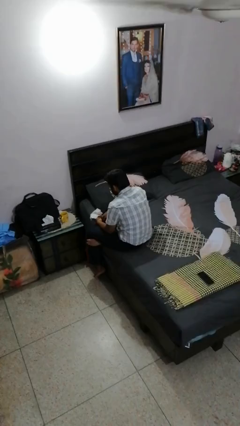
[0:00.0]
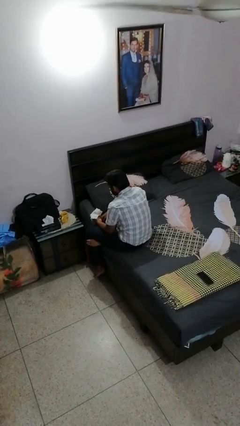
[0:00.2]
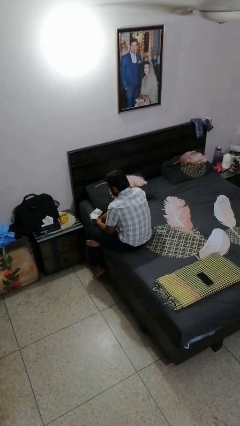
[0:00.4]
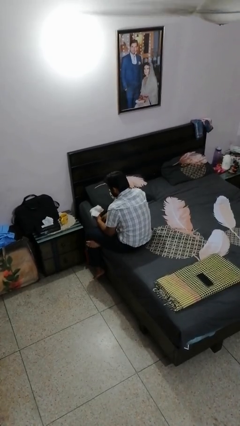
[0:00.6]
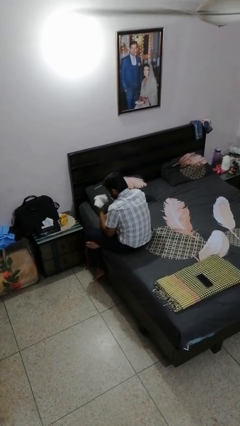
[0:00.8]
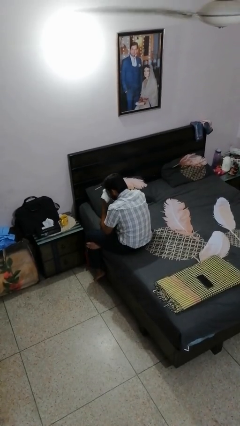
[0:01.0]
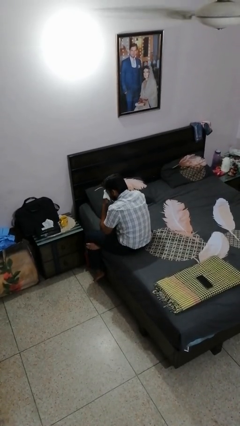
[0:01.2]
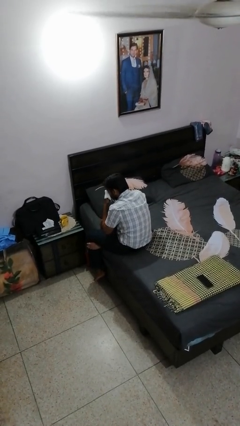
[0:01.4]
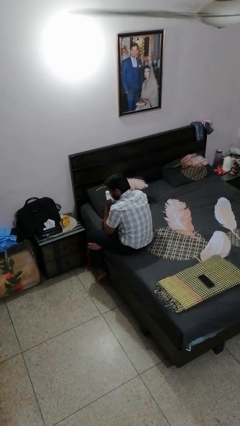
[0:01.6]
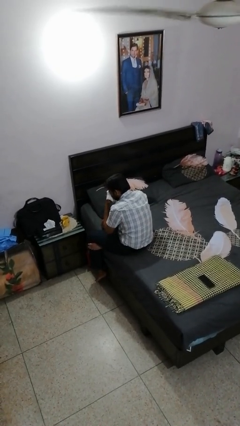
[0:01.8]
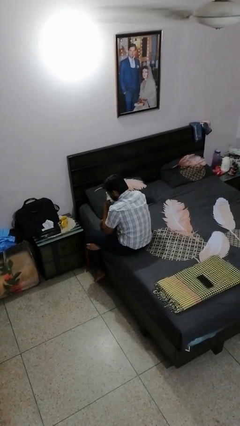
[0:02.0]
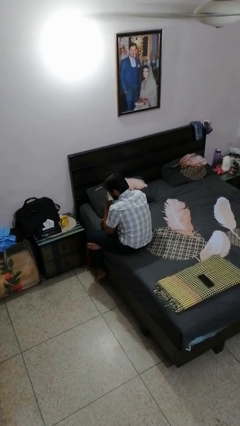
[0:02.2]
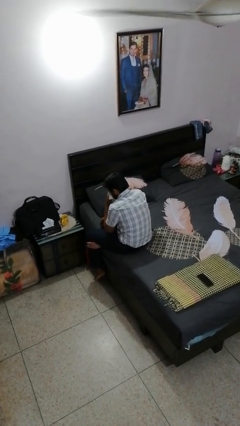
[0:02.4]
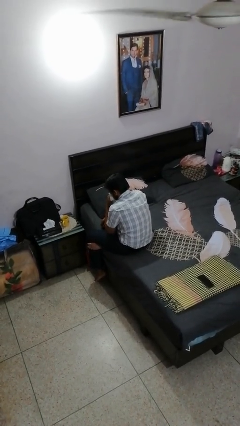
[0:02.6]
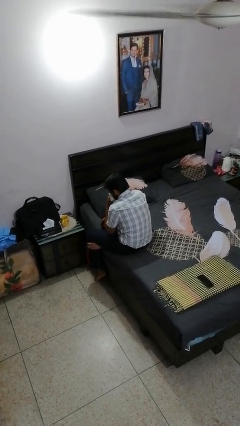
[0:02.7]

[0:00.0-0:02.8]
person blows nose

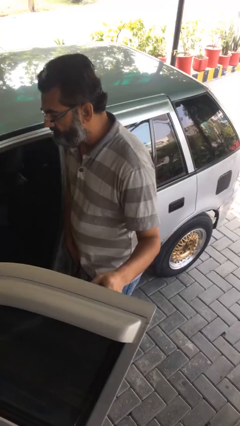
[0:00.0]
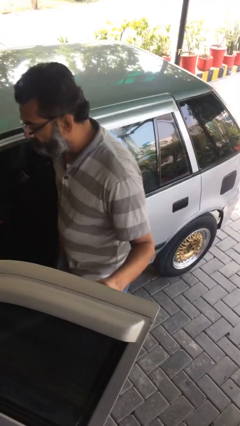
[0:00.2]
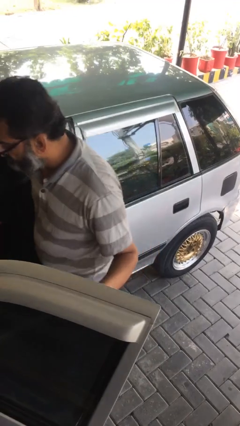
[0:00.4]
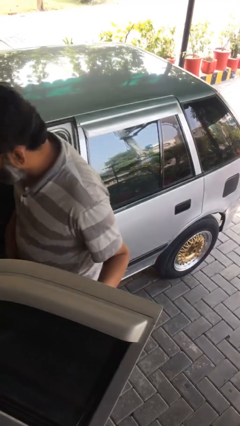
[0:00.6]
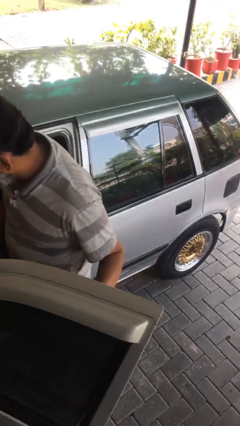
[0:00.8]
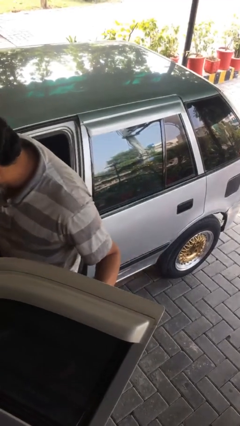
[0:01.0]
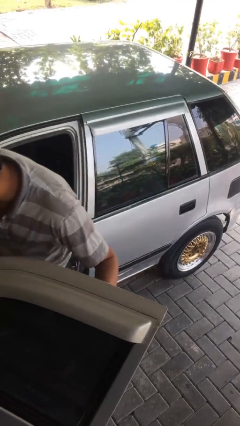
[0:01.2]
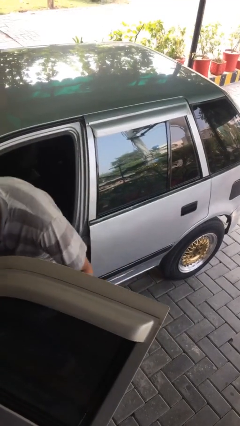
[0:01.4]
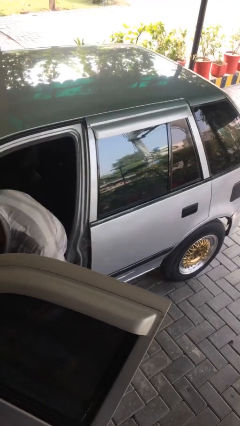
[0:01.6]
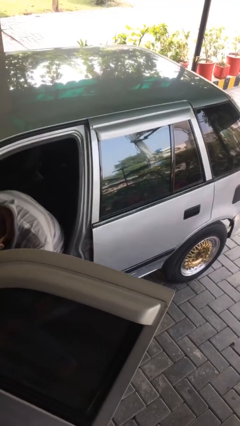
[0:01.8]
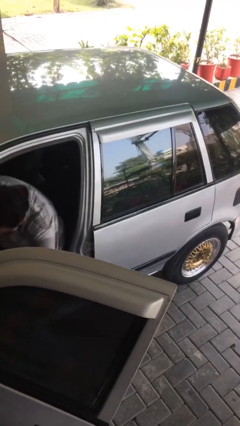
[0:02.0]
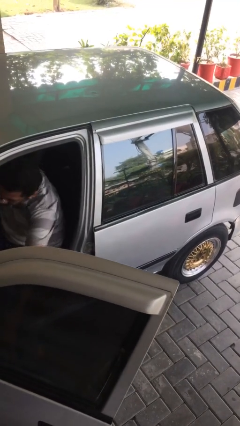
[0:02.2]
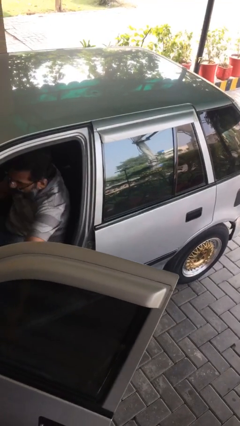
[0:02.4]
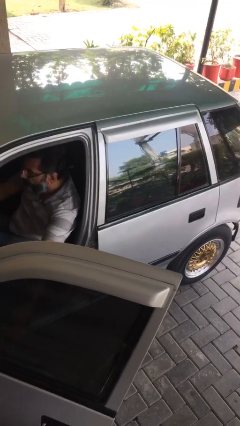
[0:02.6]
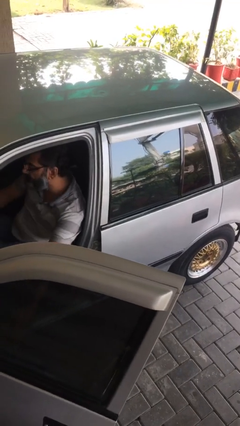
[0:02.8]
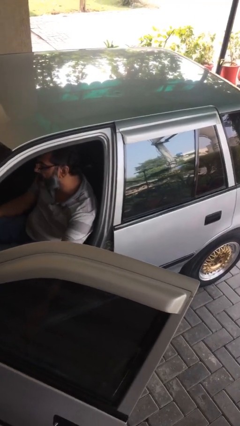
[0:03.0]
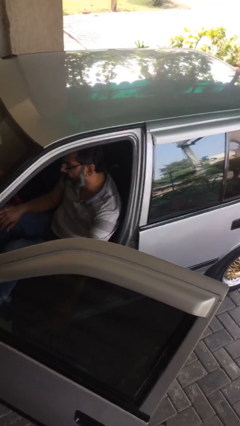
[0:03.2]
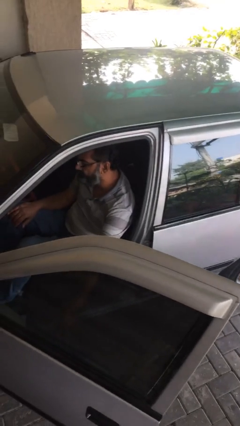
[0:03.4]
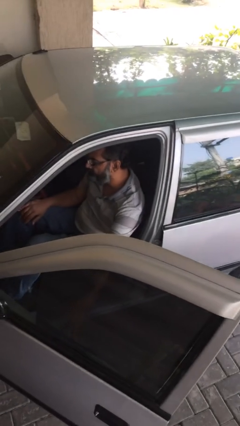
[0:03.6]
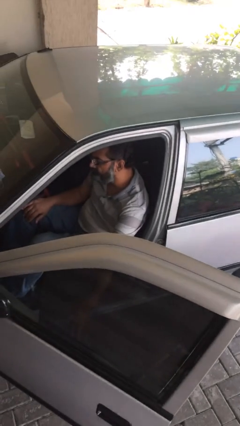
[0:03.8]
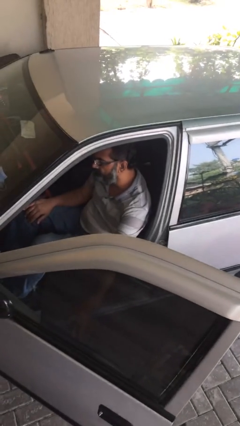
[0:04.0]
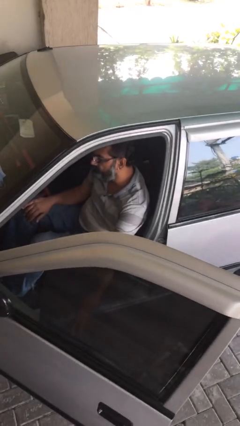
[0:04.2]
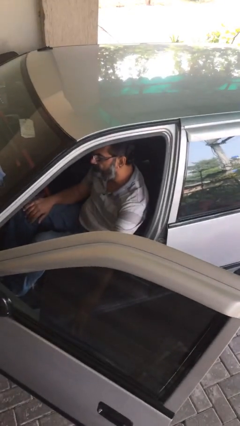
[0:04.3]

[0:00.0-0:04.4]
person enters car

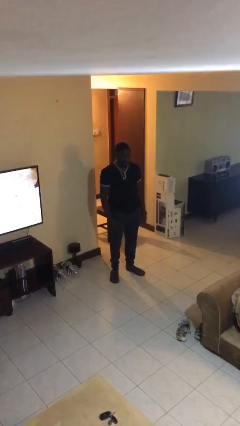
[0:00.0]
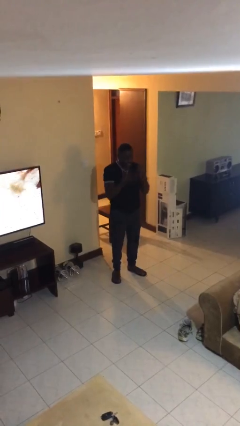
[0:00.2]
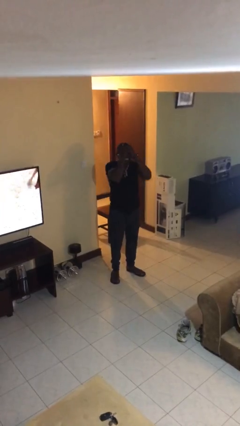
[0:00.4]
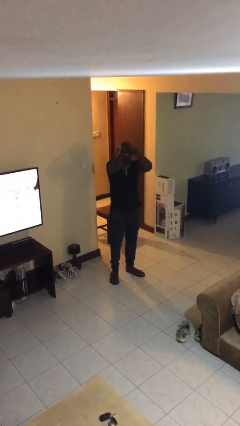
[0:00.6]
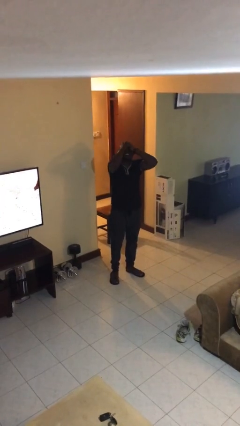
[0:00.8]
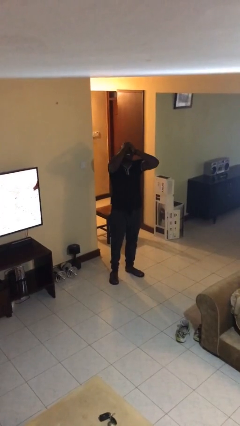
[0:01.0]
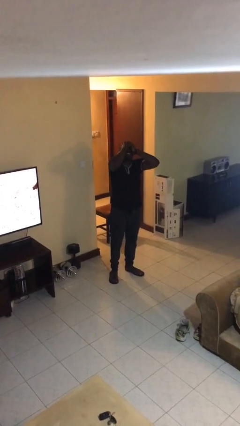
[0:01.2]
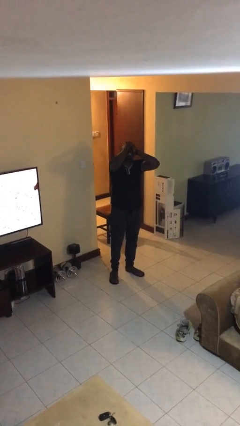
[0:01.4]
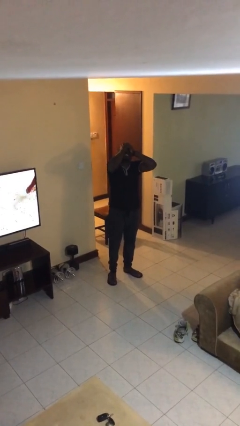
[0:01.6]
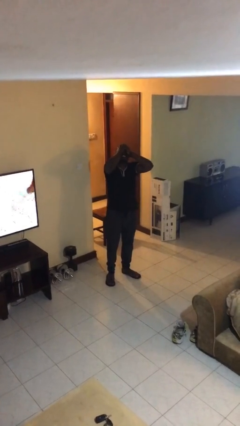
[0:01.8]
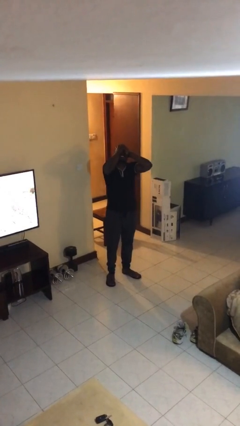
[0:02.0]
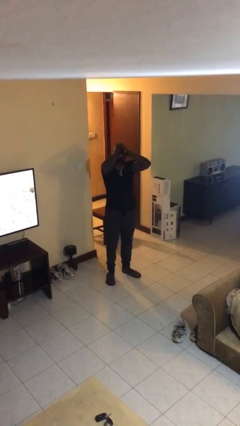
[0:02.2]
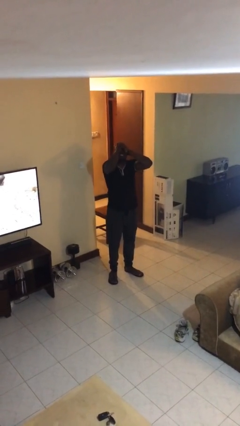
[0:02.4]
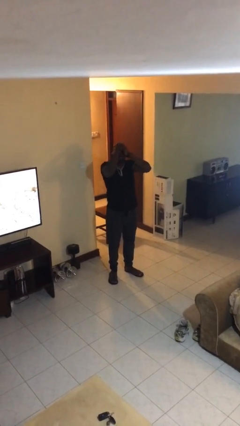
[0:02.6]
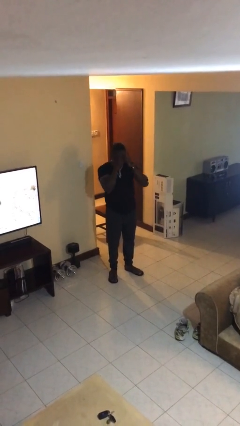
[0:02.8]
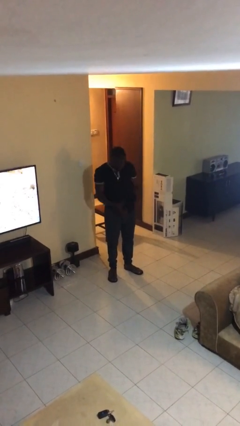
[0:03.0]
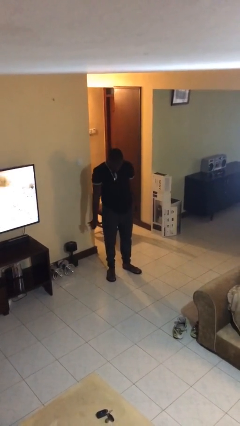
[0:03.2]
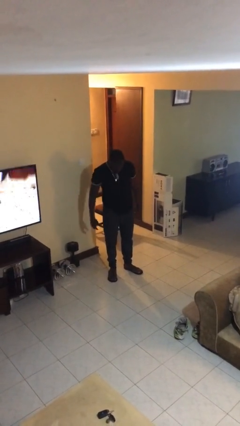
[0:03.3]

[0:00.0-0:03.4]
person covers face with hands

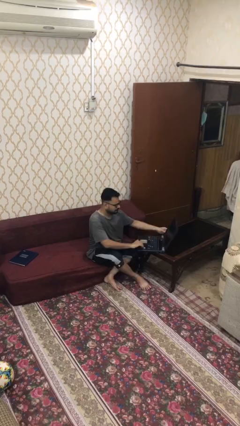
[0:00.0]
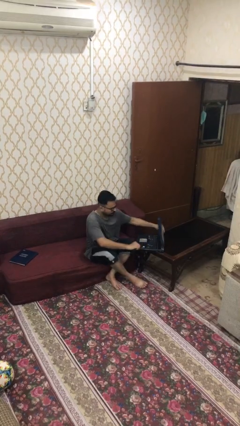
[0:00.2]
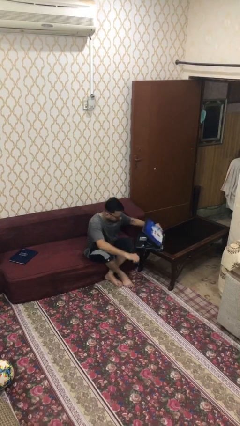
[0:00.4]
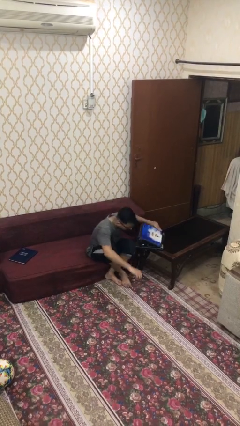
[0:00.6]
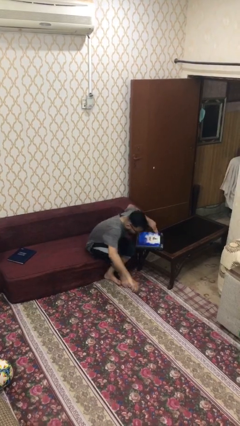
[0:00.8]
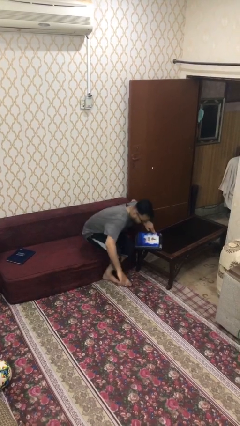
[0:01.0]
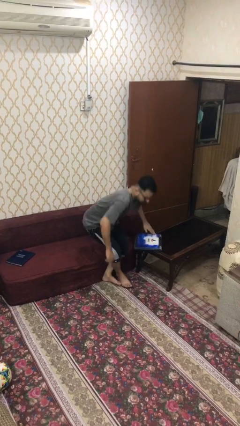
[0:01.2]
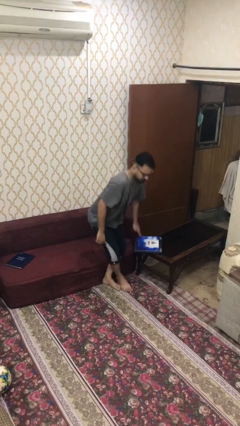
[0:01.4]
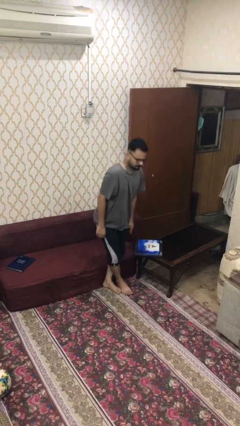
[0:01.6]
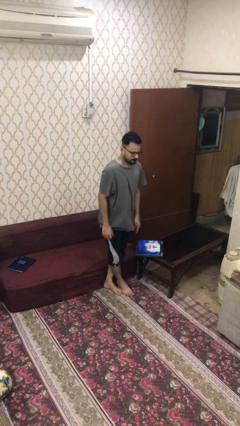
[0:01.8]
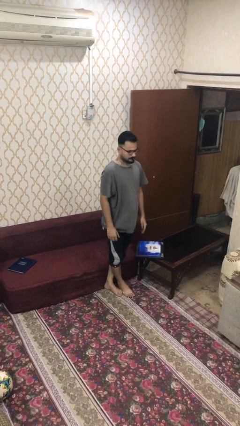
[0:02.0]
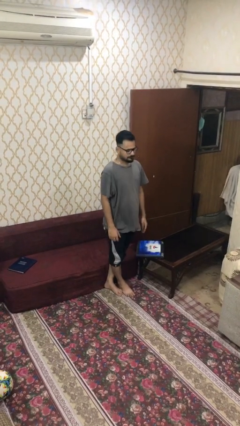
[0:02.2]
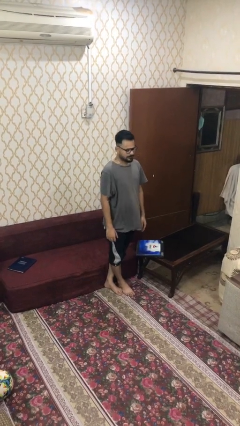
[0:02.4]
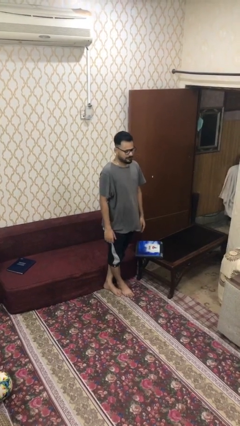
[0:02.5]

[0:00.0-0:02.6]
person stands up

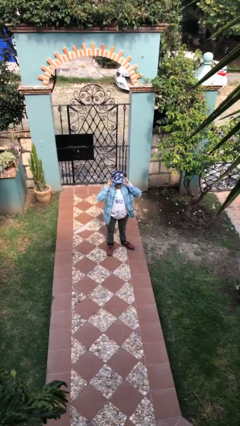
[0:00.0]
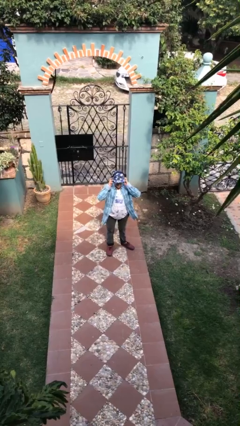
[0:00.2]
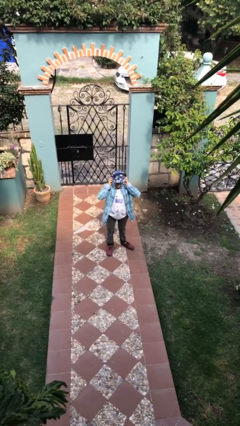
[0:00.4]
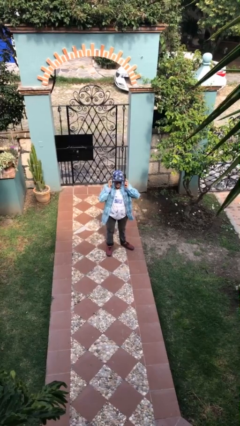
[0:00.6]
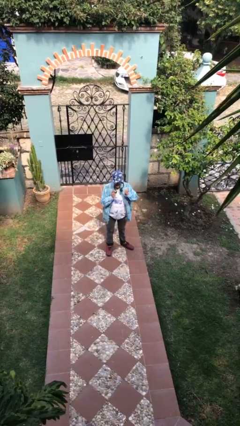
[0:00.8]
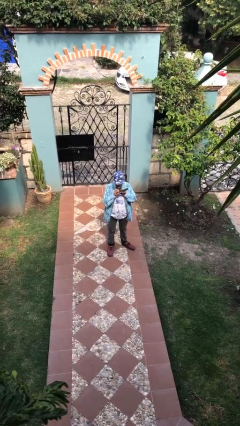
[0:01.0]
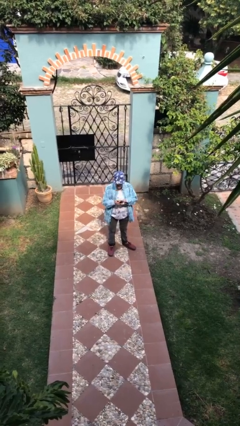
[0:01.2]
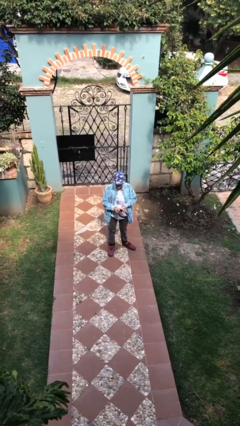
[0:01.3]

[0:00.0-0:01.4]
person takes off headphones

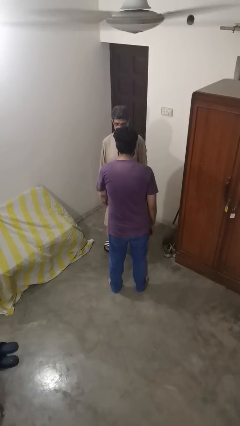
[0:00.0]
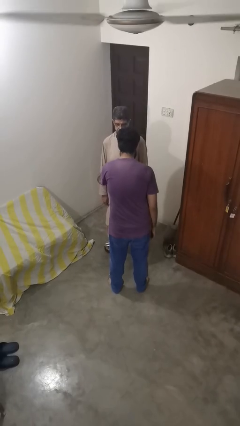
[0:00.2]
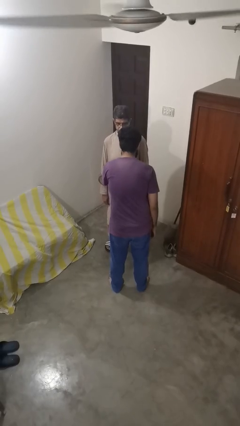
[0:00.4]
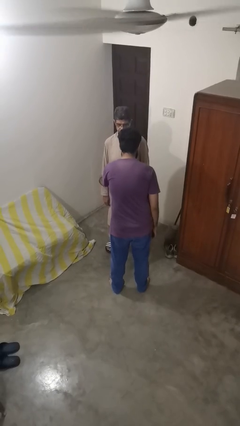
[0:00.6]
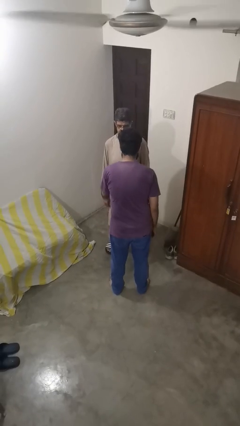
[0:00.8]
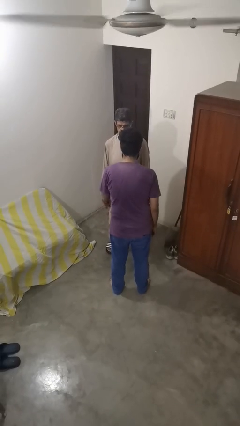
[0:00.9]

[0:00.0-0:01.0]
person grabs person by forearm

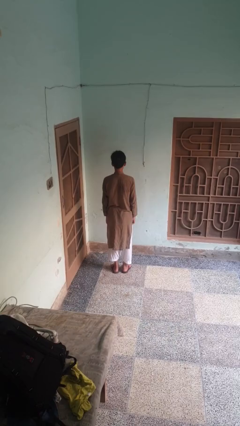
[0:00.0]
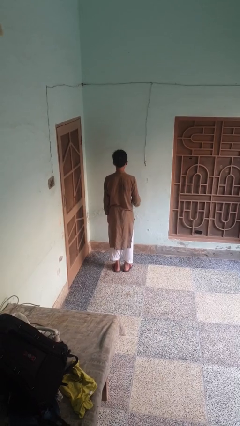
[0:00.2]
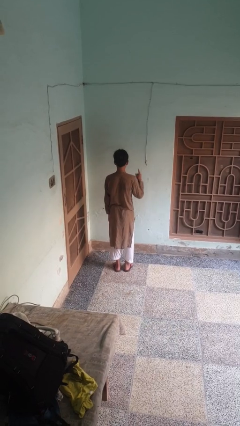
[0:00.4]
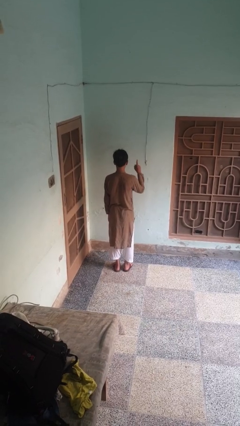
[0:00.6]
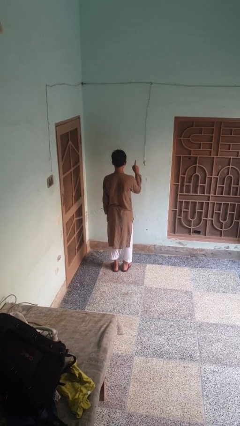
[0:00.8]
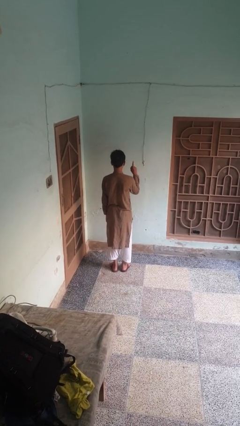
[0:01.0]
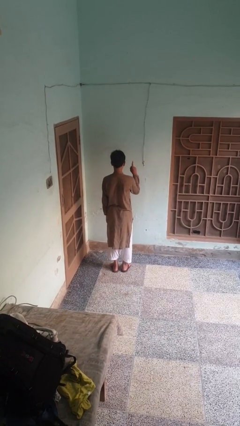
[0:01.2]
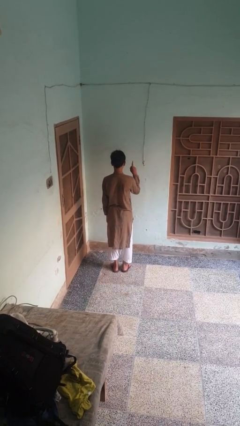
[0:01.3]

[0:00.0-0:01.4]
person gestures number one

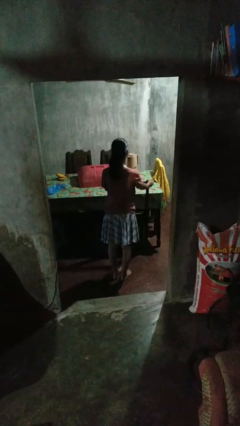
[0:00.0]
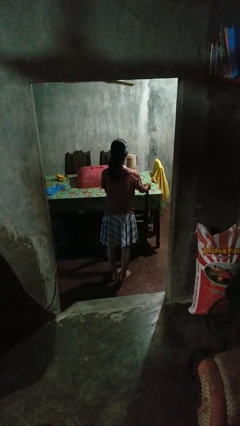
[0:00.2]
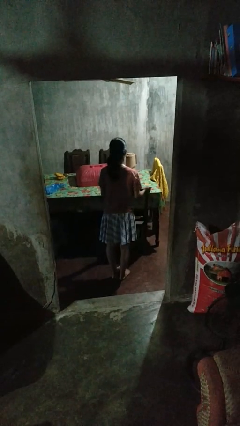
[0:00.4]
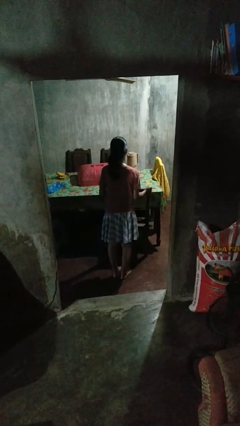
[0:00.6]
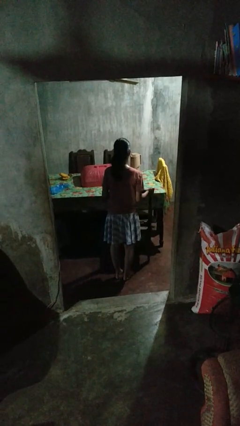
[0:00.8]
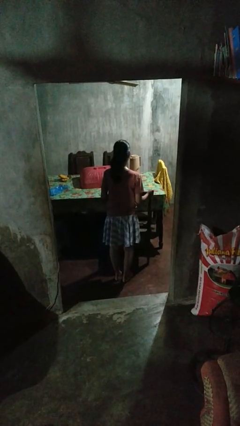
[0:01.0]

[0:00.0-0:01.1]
person pulls out chair